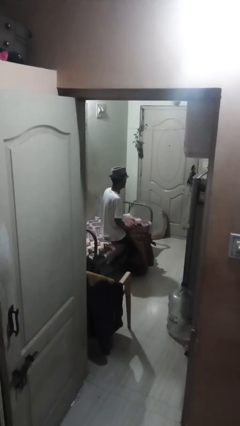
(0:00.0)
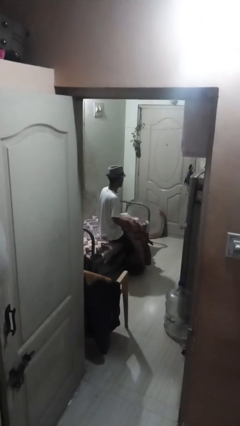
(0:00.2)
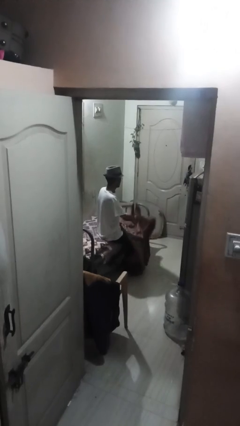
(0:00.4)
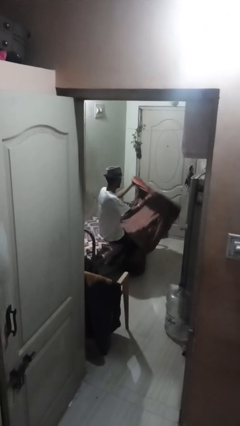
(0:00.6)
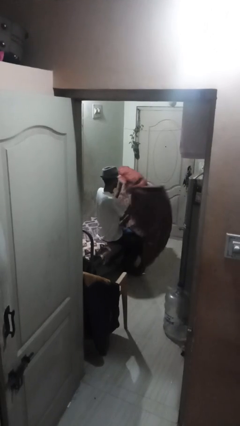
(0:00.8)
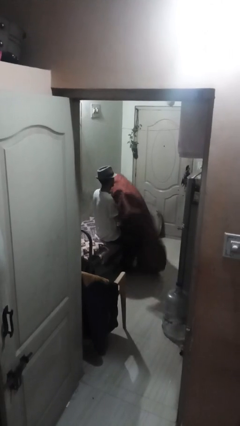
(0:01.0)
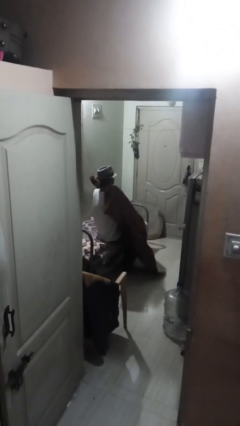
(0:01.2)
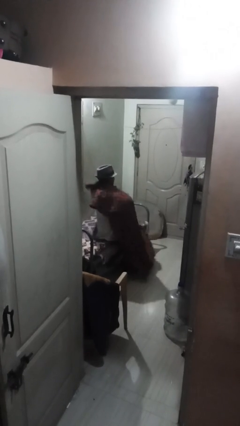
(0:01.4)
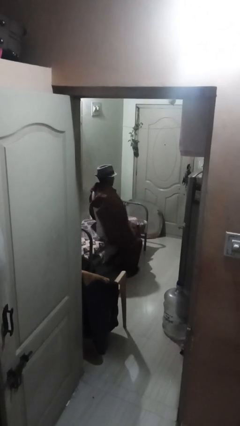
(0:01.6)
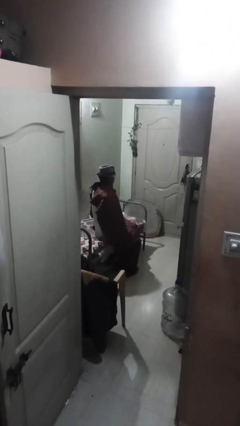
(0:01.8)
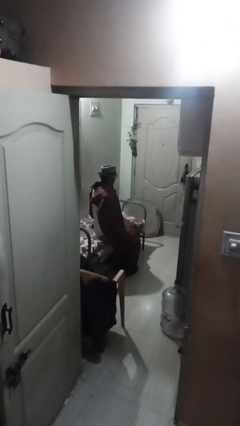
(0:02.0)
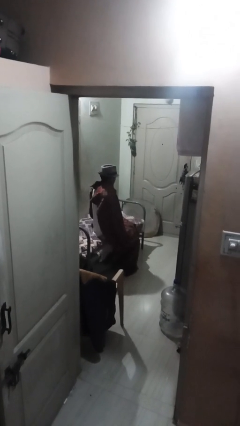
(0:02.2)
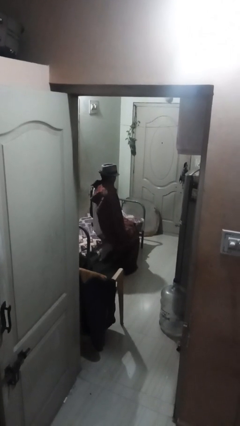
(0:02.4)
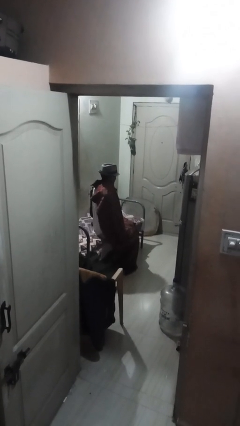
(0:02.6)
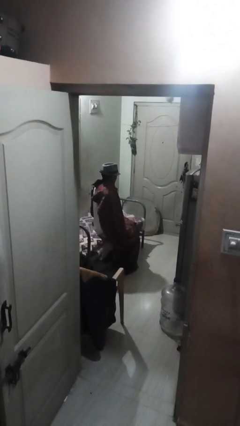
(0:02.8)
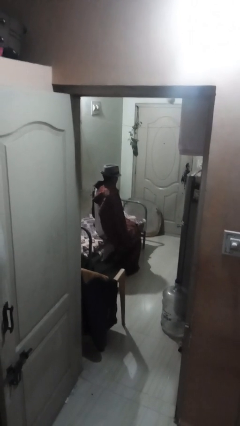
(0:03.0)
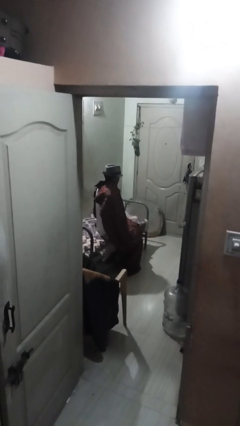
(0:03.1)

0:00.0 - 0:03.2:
person covers with blanket

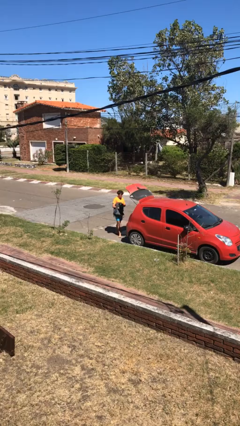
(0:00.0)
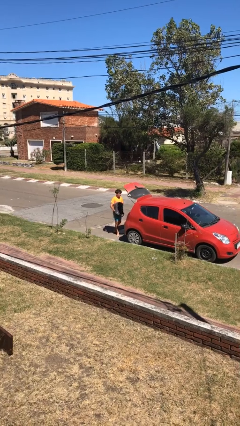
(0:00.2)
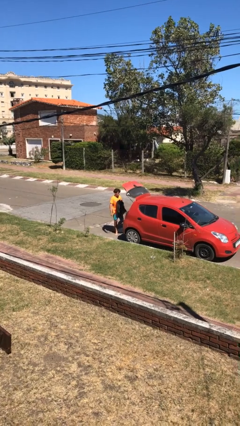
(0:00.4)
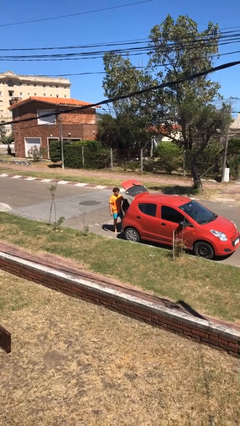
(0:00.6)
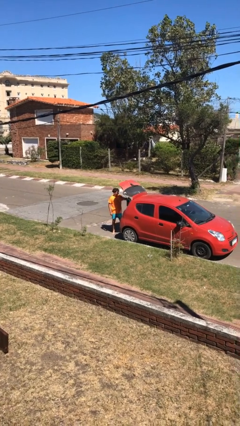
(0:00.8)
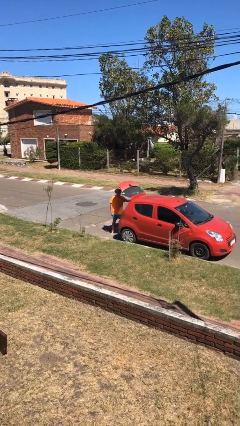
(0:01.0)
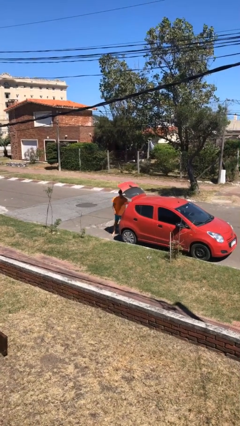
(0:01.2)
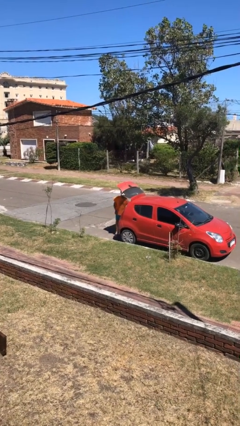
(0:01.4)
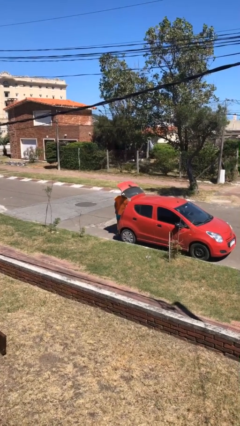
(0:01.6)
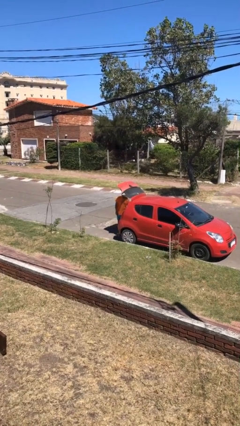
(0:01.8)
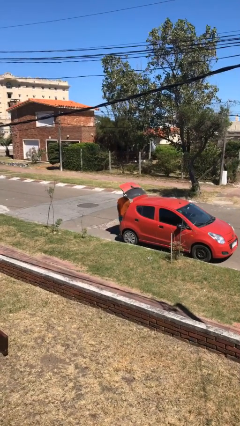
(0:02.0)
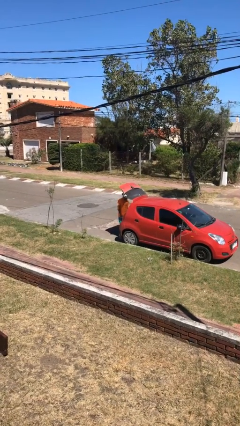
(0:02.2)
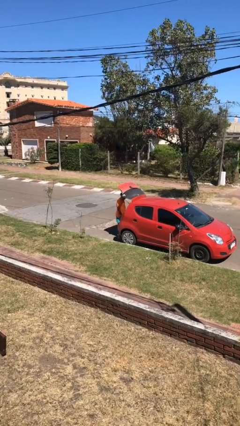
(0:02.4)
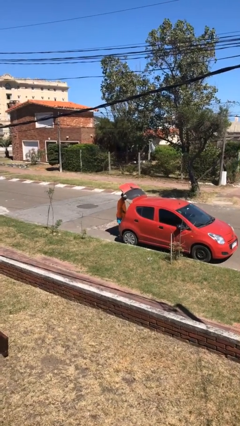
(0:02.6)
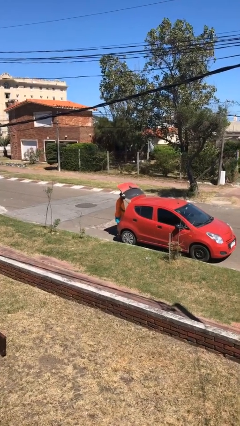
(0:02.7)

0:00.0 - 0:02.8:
person loads car

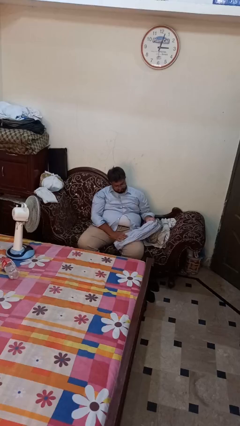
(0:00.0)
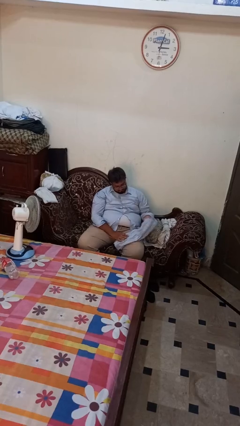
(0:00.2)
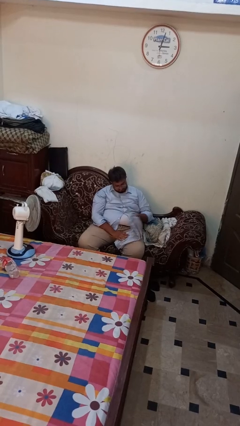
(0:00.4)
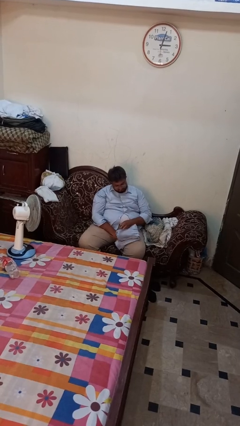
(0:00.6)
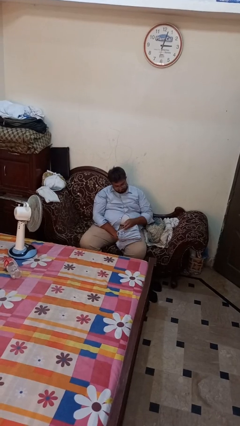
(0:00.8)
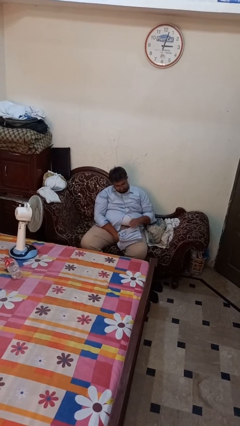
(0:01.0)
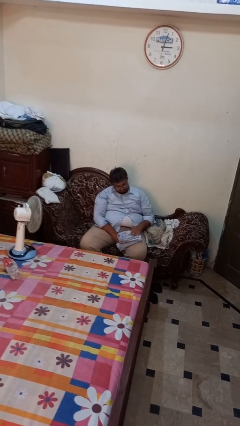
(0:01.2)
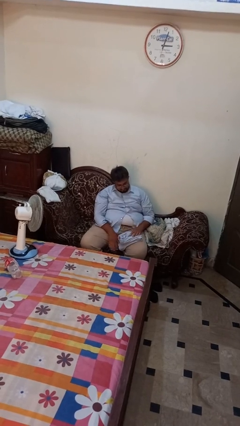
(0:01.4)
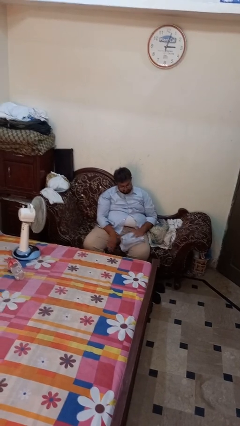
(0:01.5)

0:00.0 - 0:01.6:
person folds pants

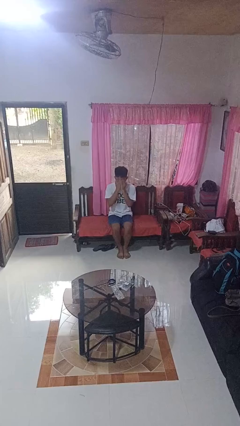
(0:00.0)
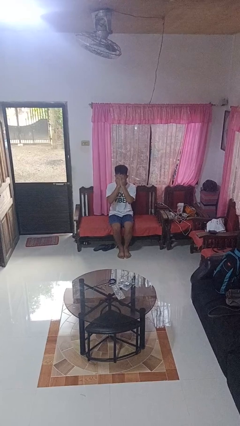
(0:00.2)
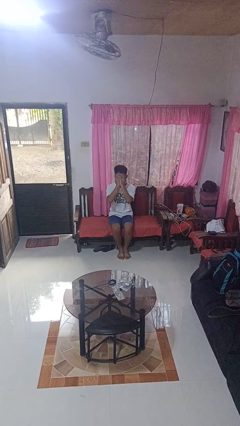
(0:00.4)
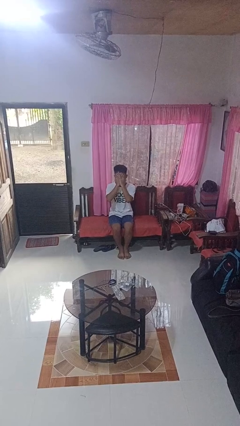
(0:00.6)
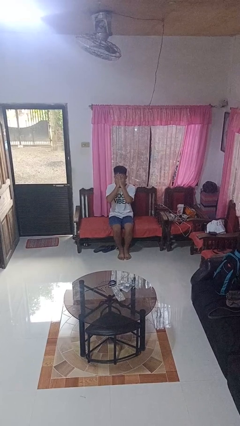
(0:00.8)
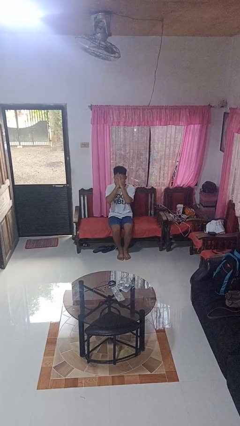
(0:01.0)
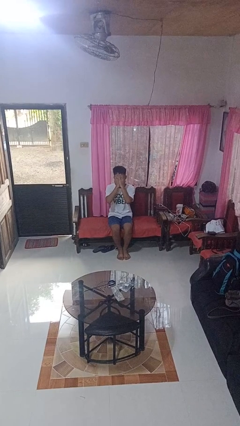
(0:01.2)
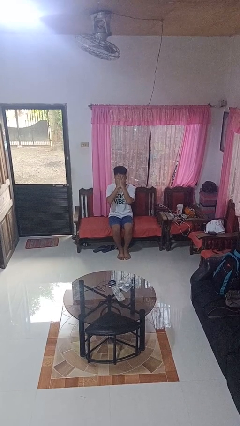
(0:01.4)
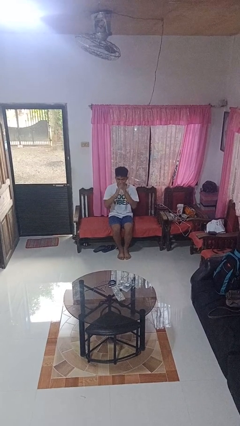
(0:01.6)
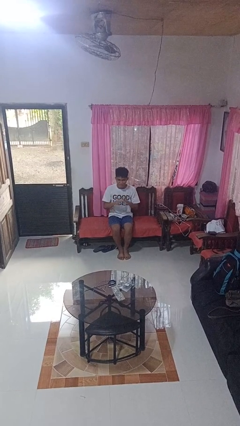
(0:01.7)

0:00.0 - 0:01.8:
person covers face with hands

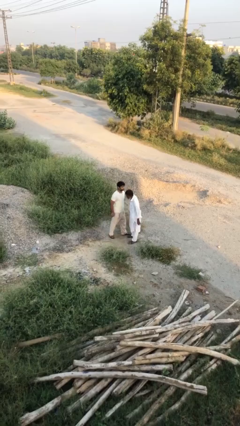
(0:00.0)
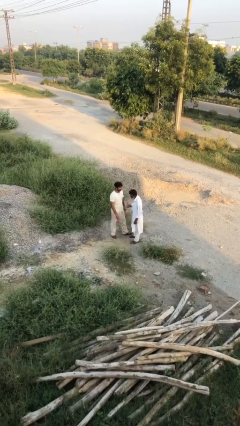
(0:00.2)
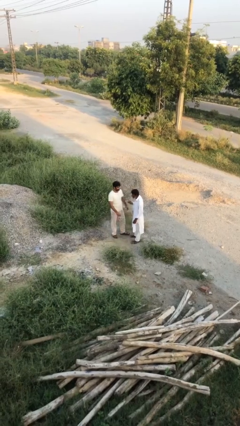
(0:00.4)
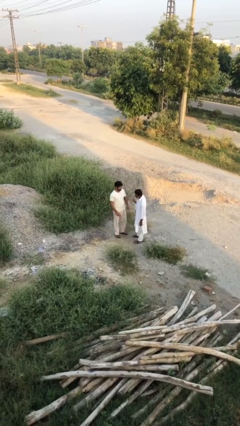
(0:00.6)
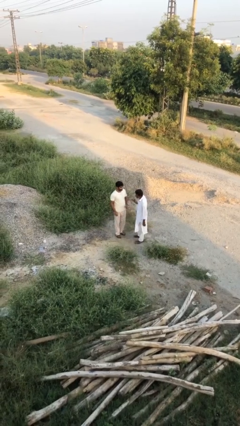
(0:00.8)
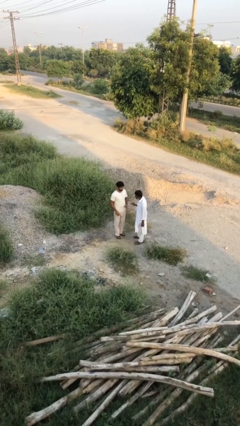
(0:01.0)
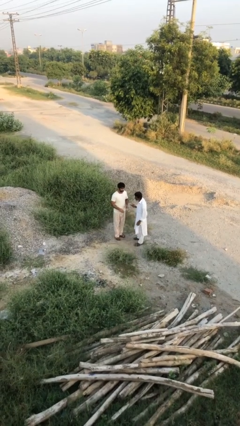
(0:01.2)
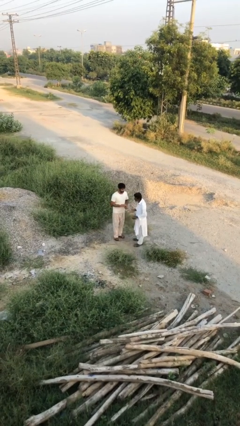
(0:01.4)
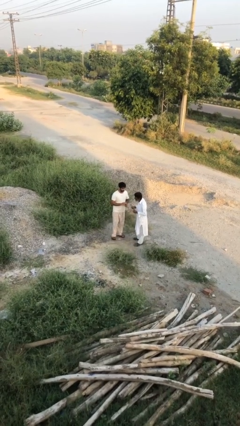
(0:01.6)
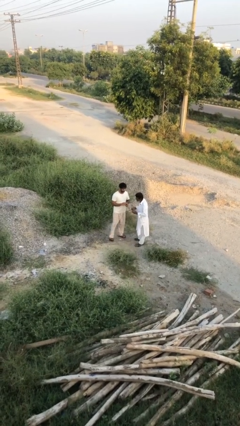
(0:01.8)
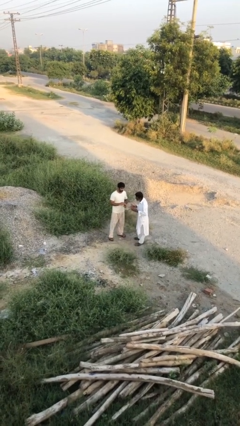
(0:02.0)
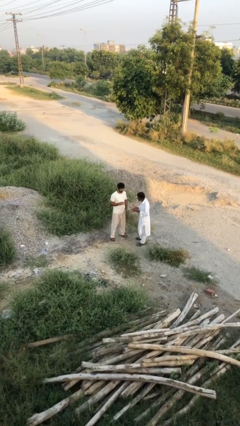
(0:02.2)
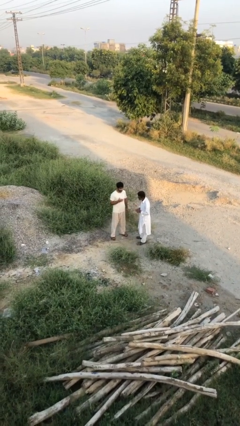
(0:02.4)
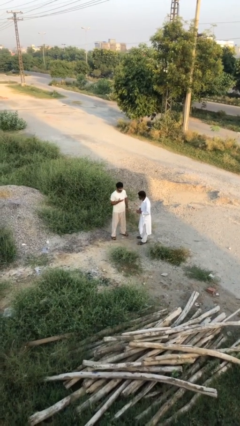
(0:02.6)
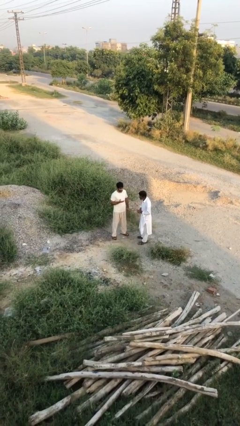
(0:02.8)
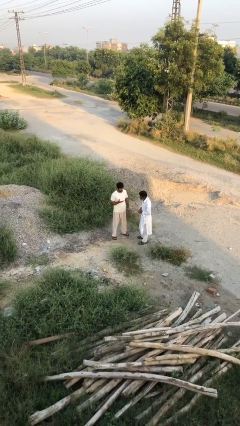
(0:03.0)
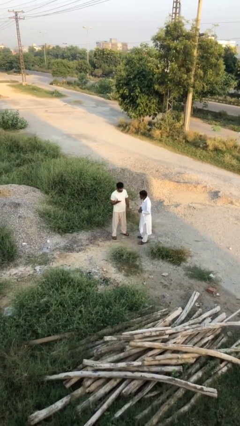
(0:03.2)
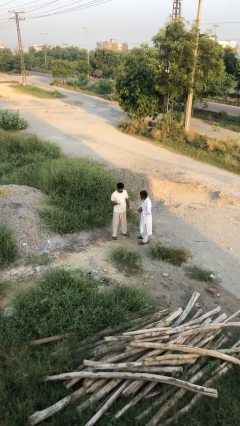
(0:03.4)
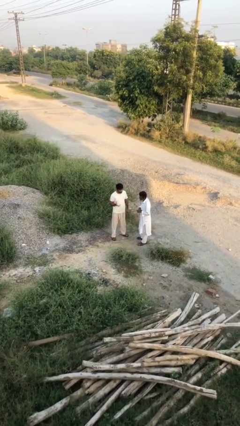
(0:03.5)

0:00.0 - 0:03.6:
person talks to person

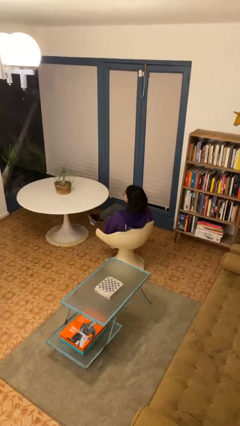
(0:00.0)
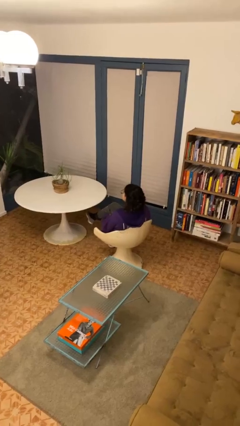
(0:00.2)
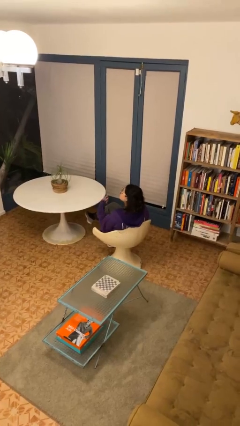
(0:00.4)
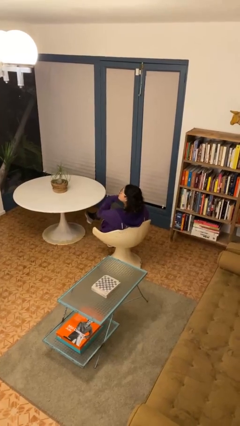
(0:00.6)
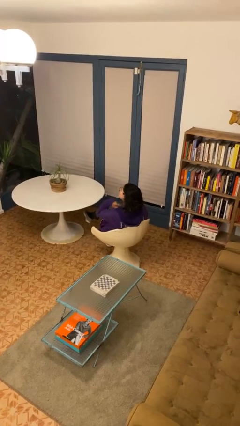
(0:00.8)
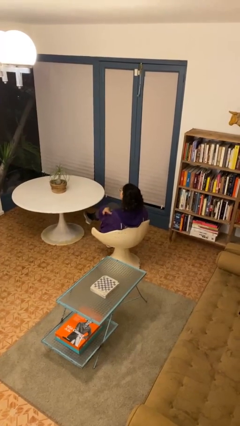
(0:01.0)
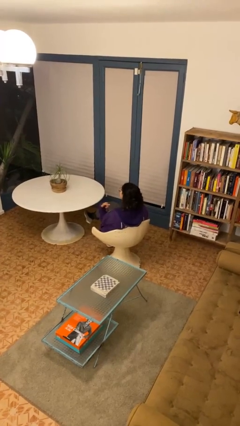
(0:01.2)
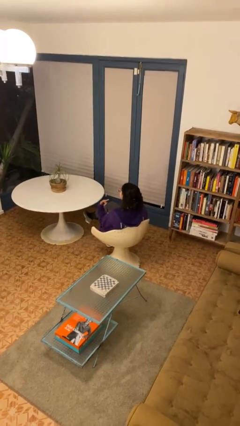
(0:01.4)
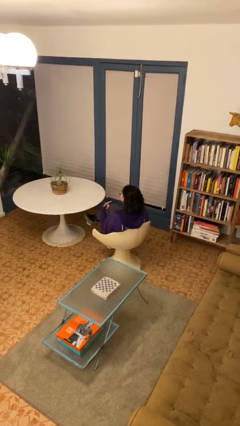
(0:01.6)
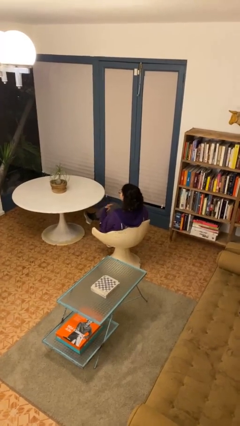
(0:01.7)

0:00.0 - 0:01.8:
person gestures cut

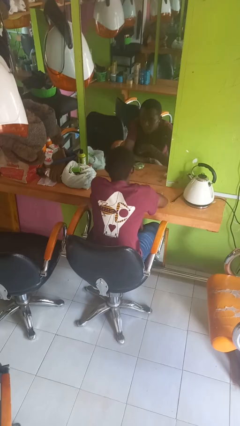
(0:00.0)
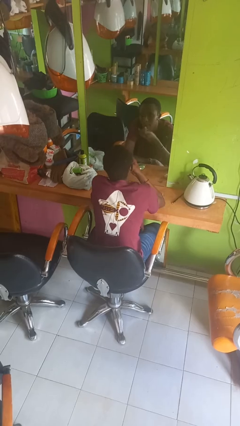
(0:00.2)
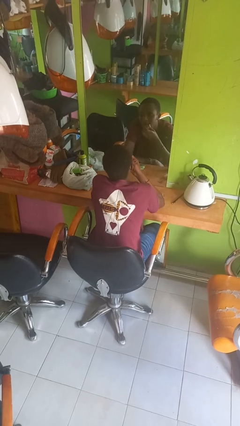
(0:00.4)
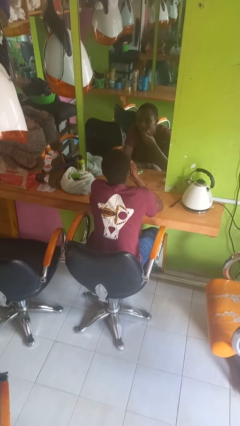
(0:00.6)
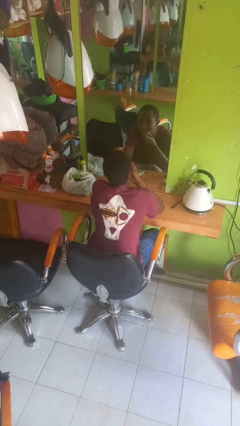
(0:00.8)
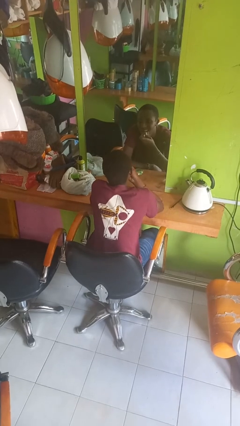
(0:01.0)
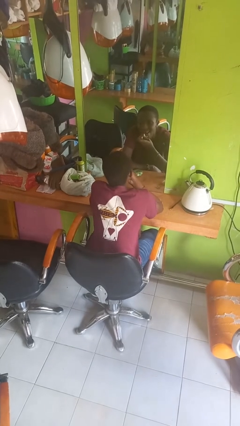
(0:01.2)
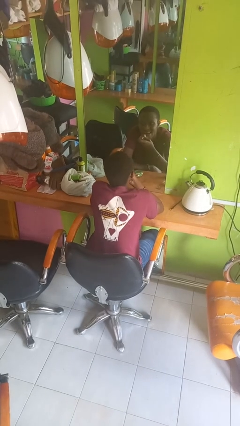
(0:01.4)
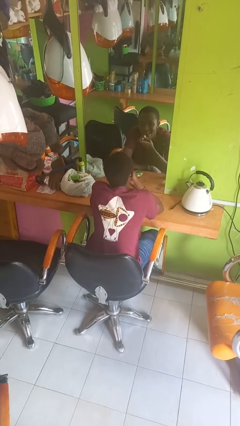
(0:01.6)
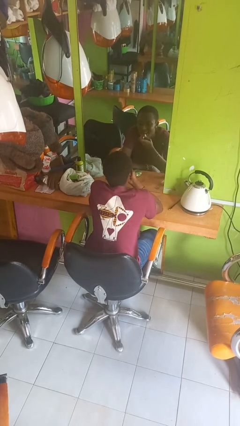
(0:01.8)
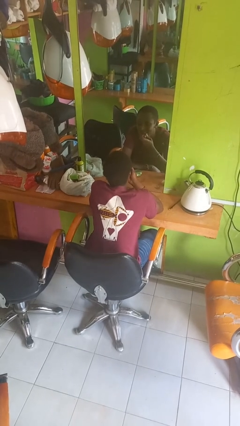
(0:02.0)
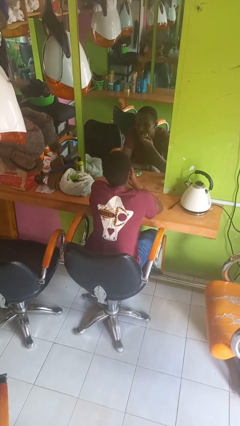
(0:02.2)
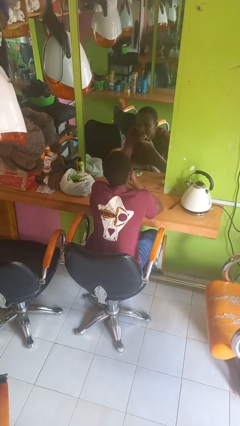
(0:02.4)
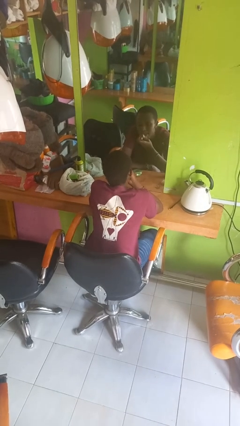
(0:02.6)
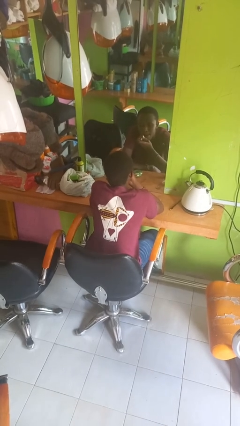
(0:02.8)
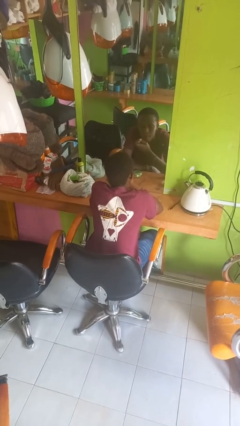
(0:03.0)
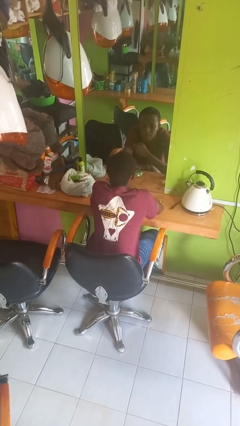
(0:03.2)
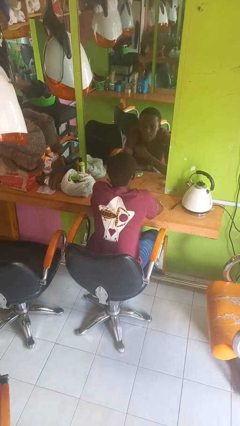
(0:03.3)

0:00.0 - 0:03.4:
person applies lip makeup
